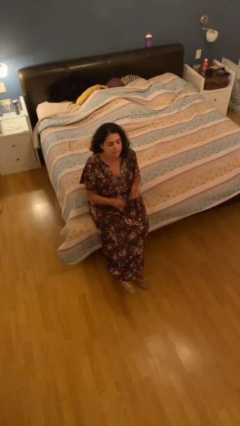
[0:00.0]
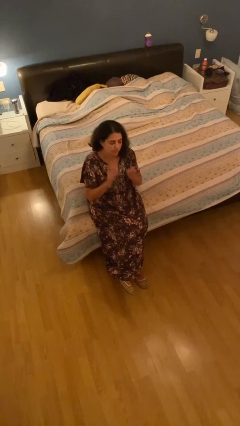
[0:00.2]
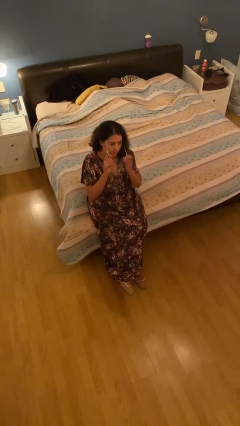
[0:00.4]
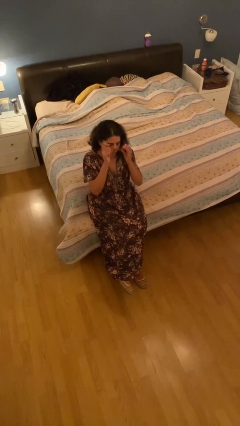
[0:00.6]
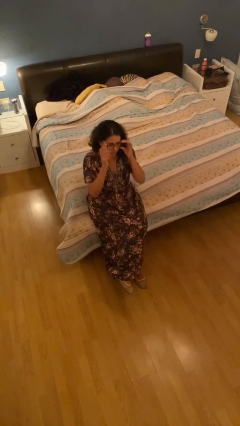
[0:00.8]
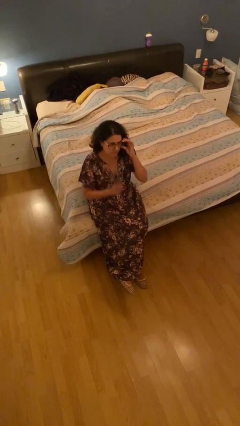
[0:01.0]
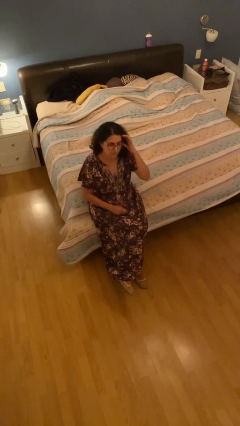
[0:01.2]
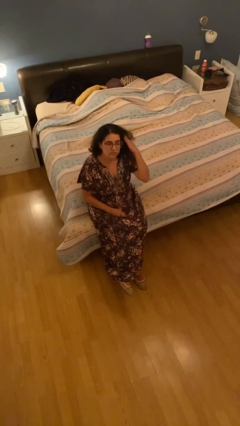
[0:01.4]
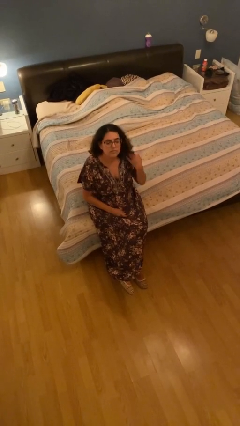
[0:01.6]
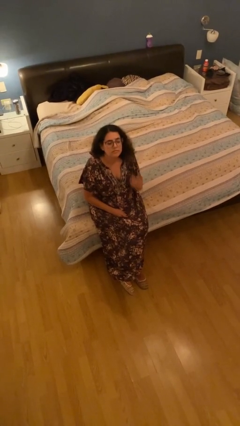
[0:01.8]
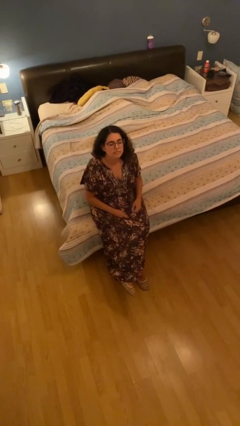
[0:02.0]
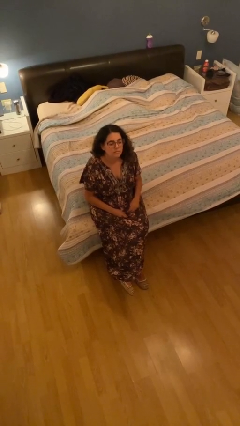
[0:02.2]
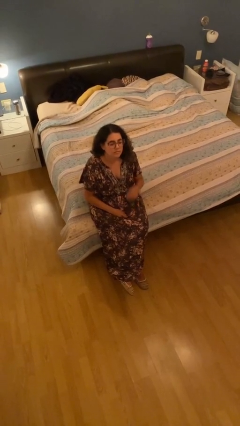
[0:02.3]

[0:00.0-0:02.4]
person puts on glasses

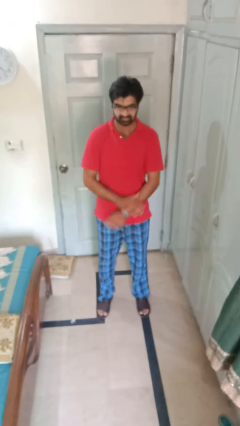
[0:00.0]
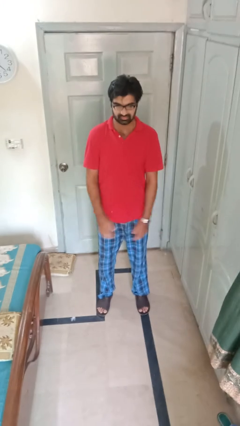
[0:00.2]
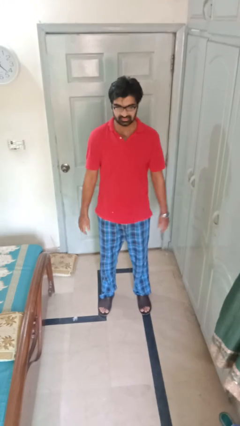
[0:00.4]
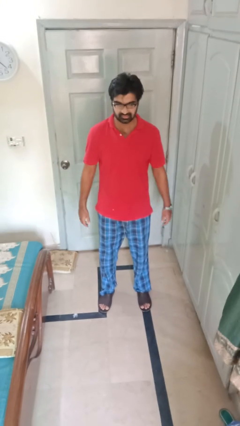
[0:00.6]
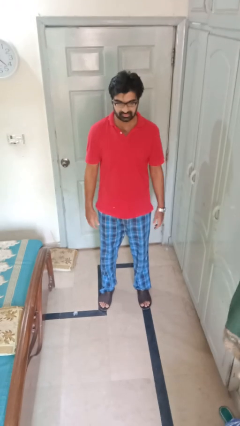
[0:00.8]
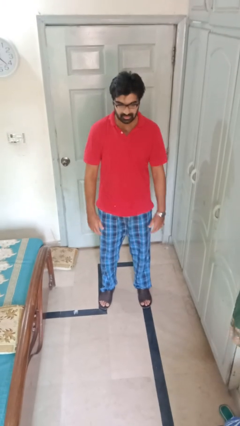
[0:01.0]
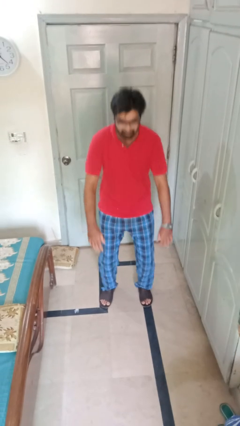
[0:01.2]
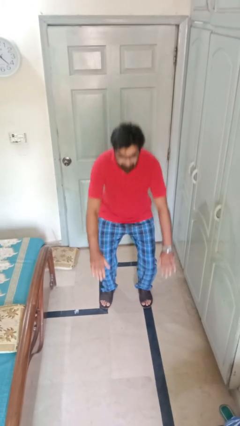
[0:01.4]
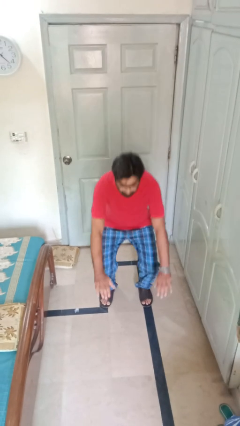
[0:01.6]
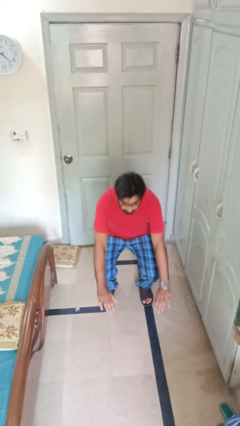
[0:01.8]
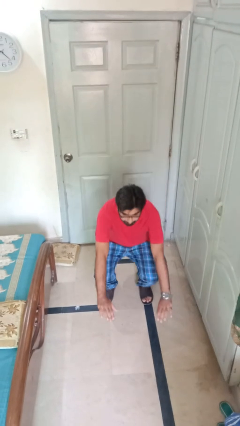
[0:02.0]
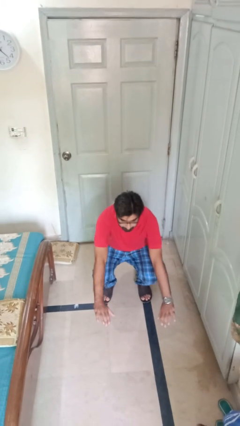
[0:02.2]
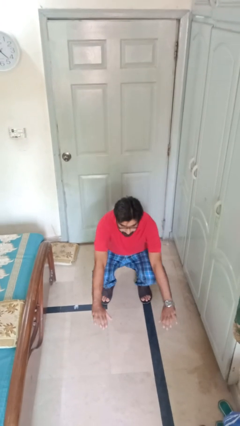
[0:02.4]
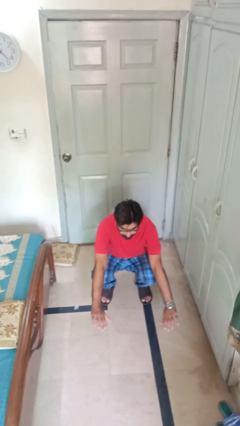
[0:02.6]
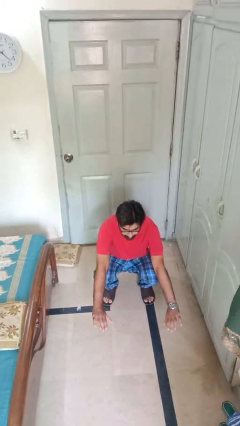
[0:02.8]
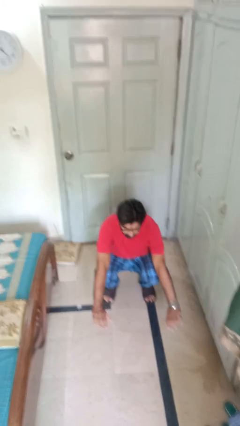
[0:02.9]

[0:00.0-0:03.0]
person squats

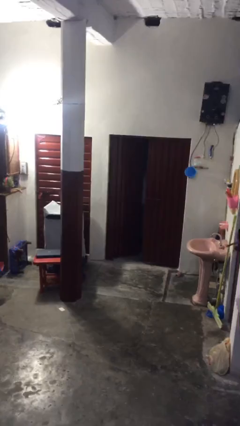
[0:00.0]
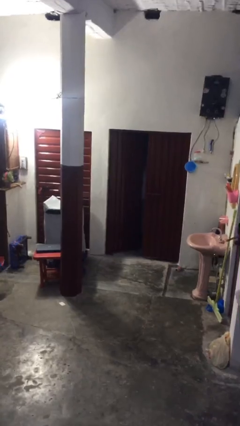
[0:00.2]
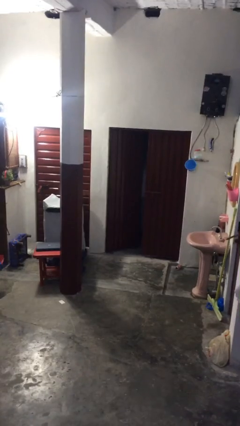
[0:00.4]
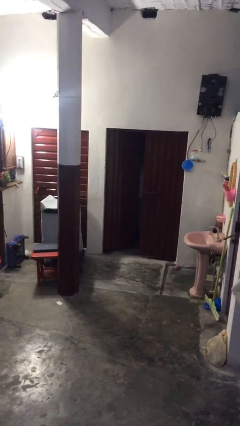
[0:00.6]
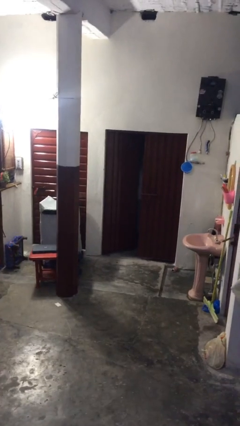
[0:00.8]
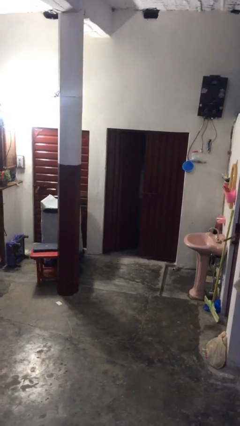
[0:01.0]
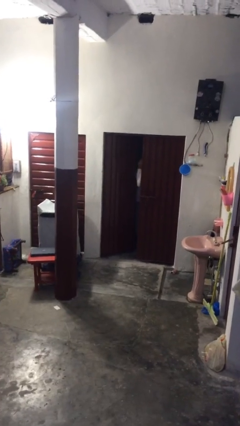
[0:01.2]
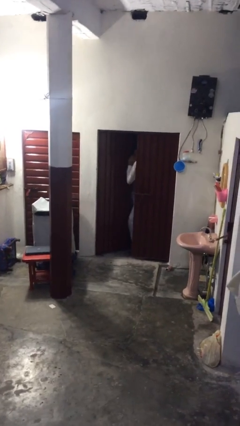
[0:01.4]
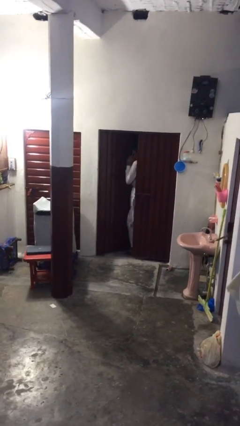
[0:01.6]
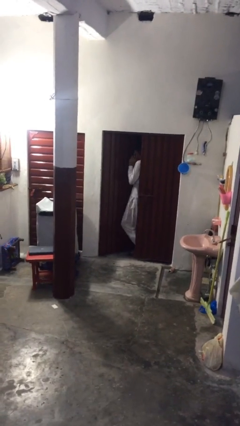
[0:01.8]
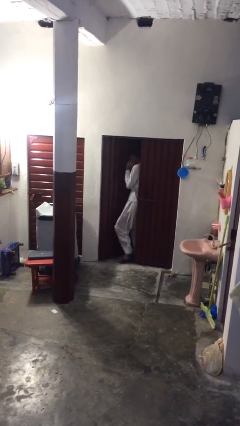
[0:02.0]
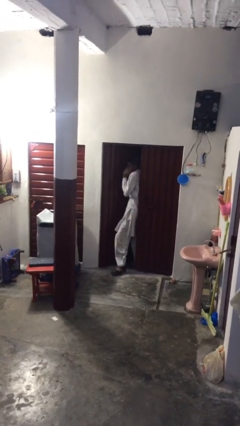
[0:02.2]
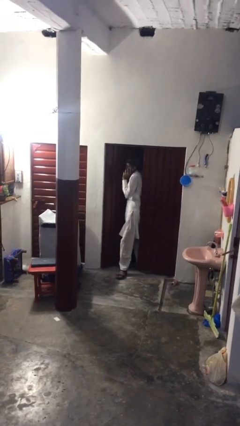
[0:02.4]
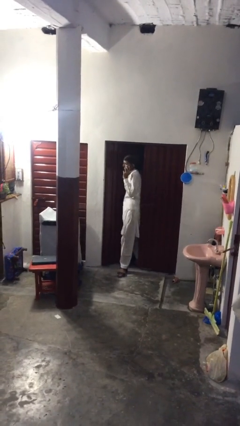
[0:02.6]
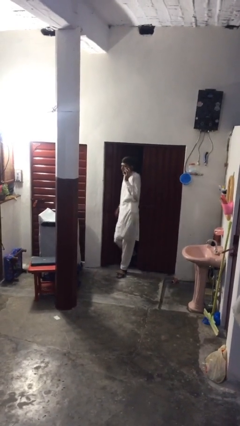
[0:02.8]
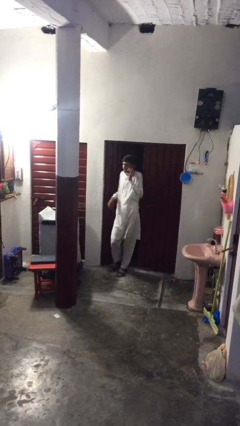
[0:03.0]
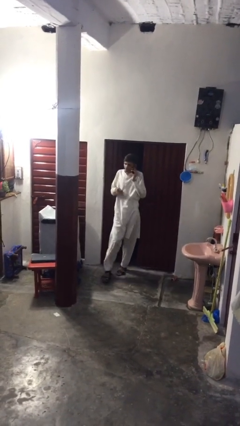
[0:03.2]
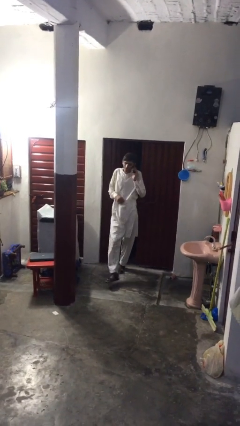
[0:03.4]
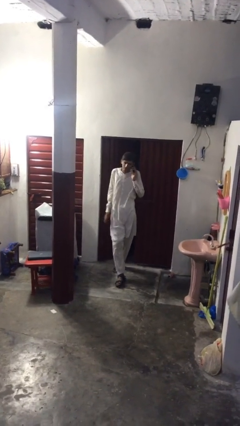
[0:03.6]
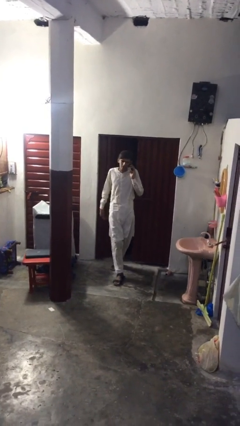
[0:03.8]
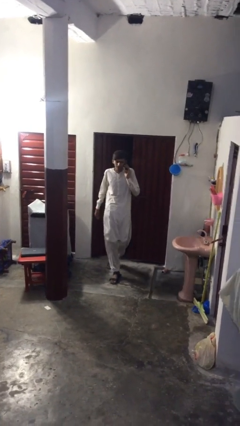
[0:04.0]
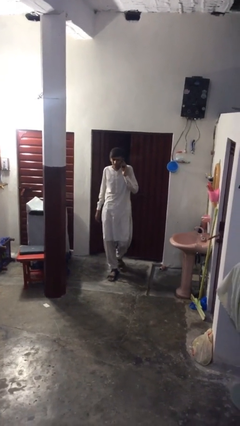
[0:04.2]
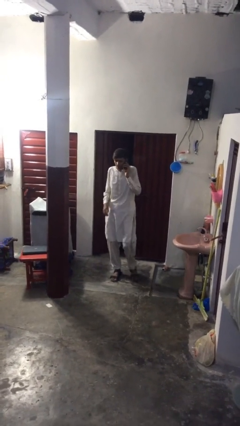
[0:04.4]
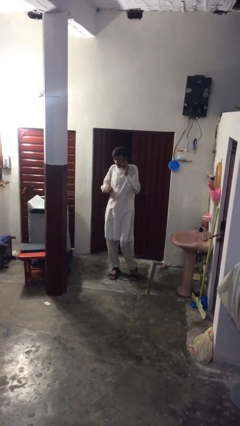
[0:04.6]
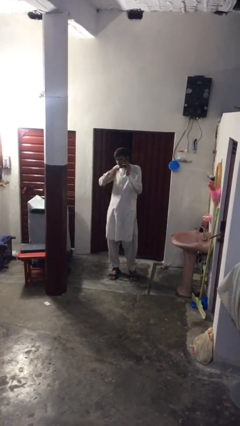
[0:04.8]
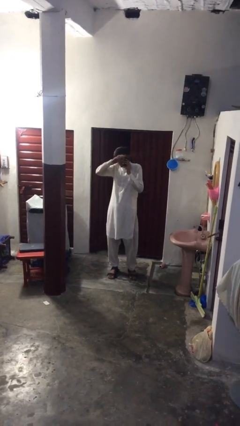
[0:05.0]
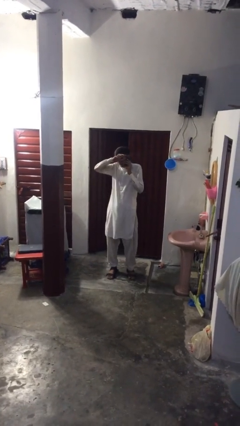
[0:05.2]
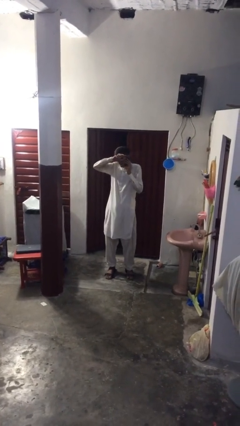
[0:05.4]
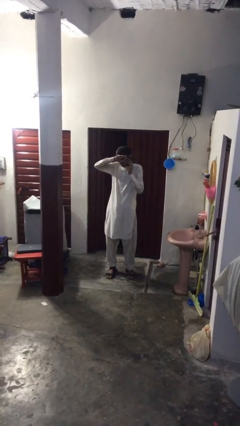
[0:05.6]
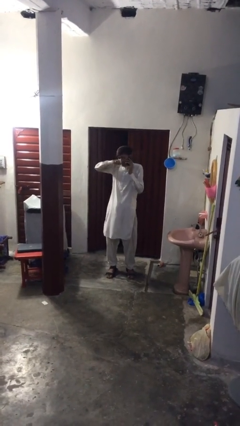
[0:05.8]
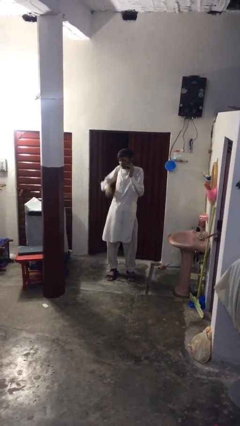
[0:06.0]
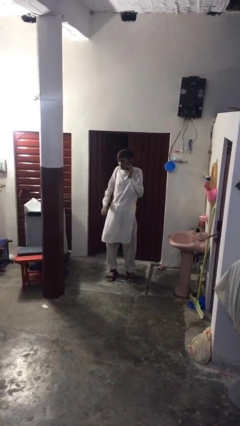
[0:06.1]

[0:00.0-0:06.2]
person enters scene through structure

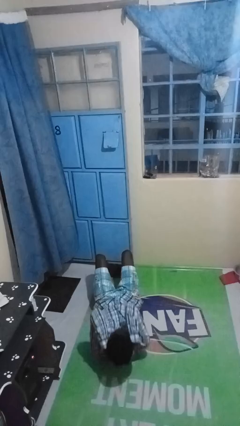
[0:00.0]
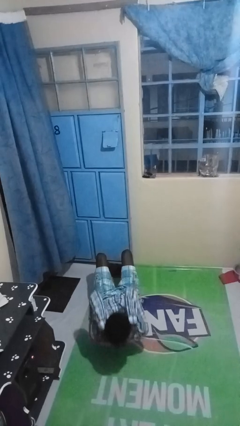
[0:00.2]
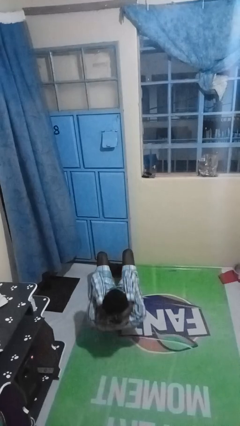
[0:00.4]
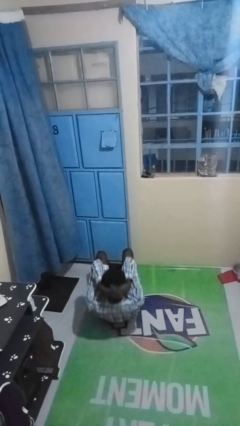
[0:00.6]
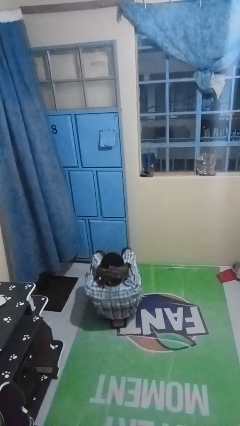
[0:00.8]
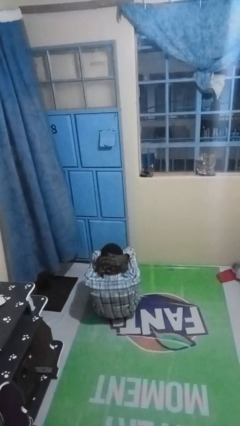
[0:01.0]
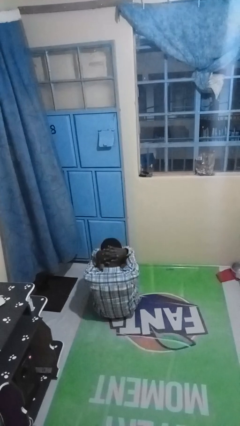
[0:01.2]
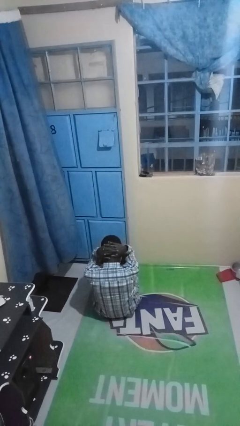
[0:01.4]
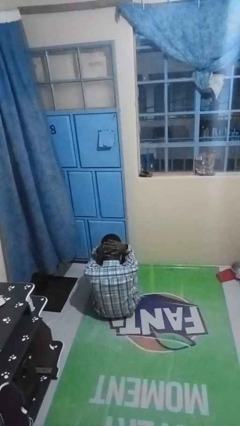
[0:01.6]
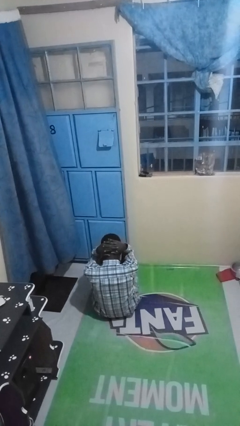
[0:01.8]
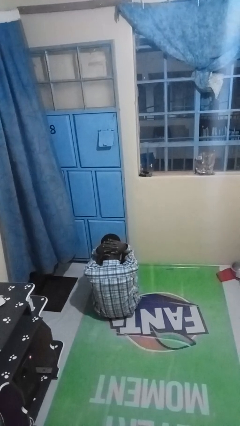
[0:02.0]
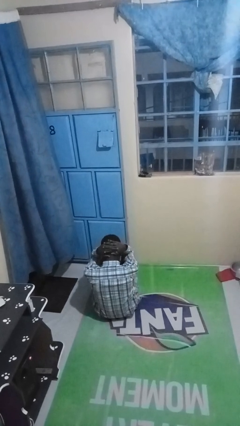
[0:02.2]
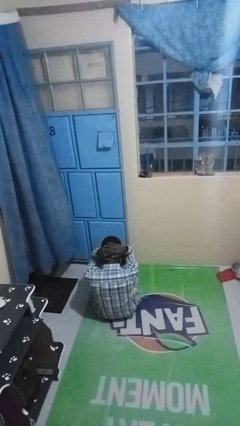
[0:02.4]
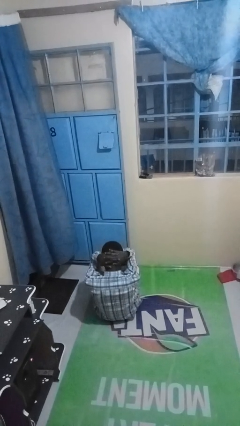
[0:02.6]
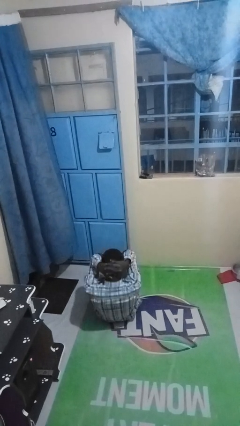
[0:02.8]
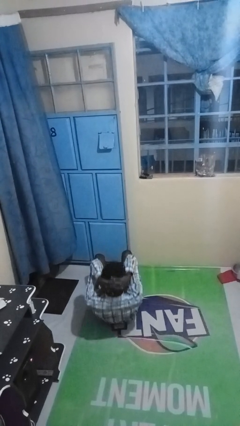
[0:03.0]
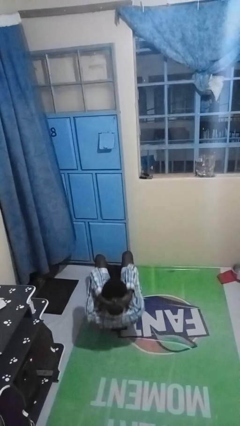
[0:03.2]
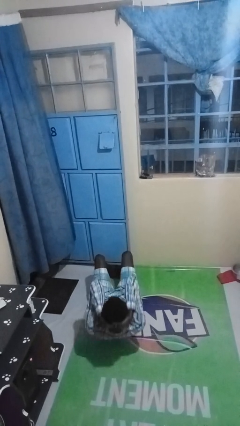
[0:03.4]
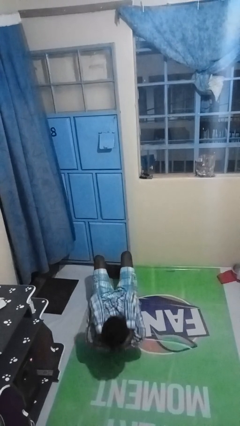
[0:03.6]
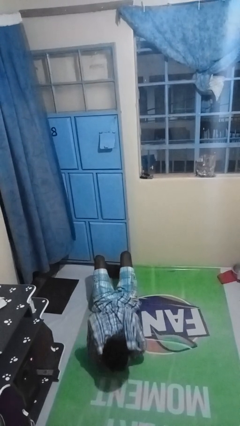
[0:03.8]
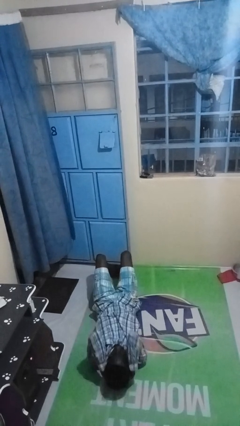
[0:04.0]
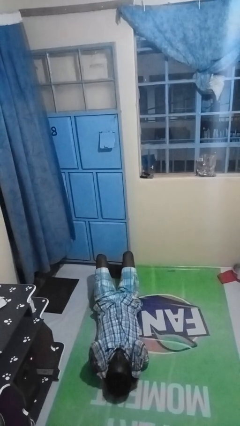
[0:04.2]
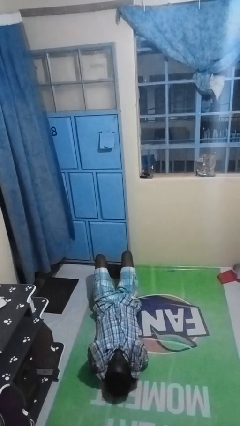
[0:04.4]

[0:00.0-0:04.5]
person exercises with situp

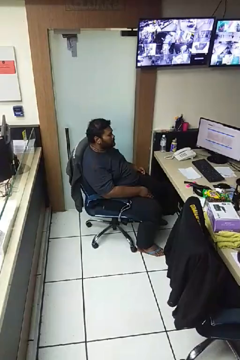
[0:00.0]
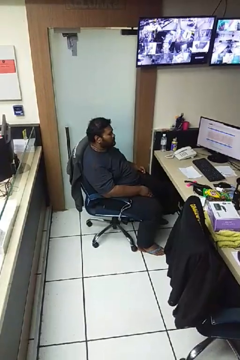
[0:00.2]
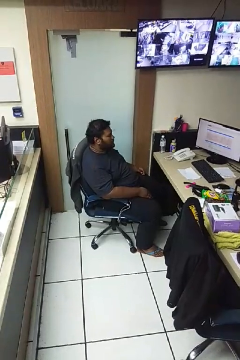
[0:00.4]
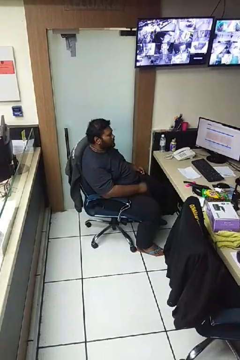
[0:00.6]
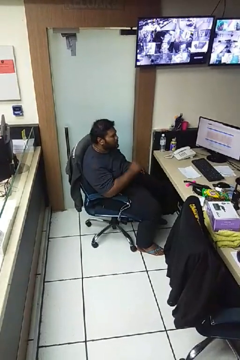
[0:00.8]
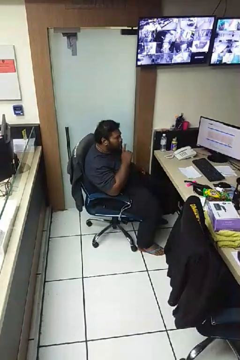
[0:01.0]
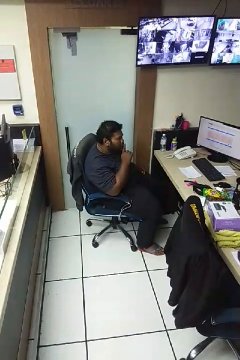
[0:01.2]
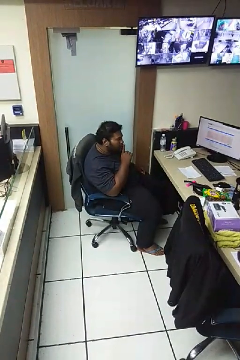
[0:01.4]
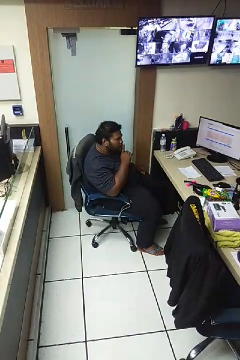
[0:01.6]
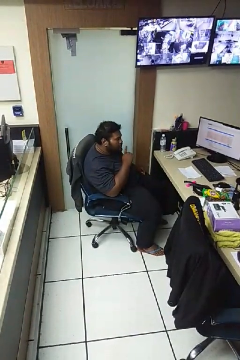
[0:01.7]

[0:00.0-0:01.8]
person gestures be quiet
